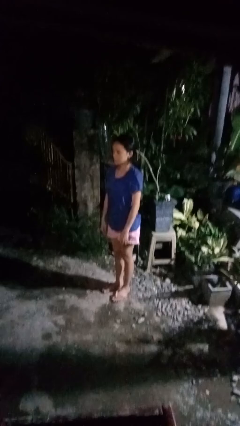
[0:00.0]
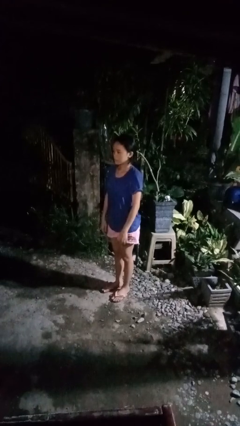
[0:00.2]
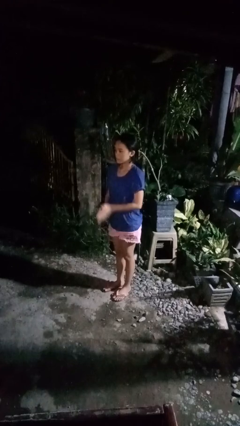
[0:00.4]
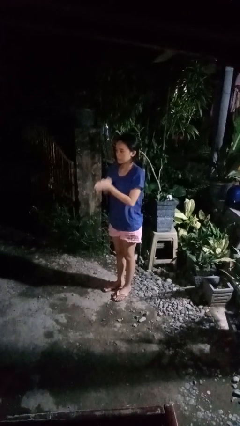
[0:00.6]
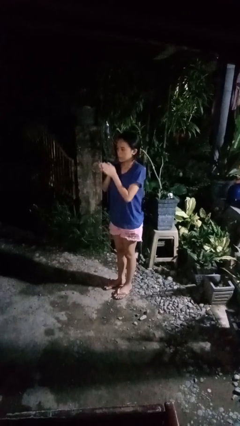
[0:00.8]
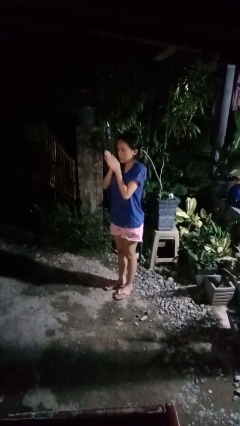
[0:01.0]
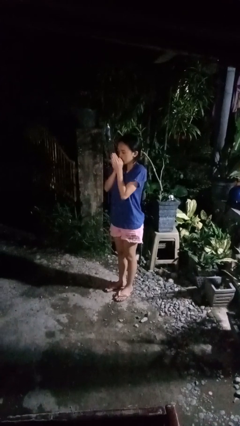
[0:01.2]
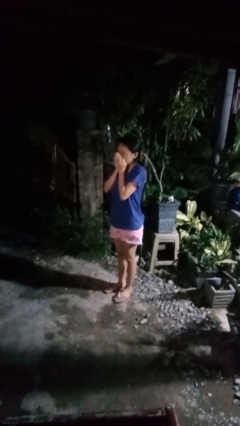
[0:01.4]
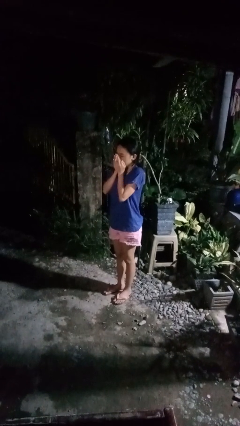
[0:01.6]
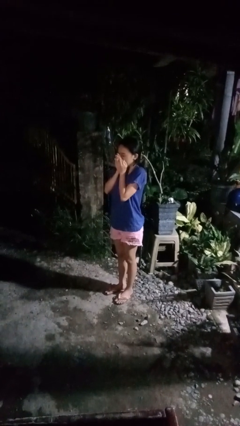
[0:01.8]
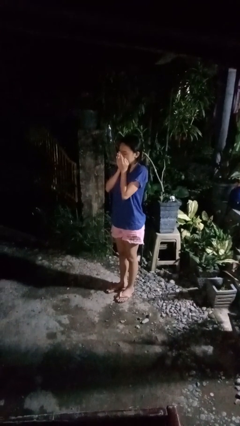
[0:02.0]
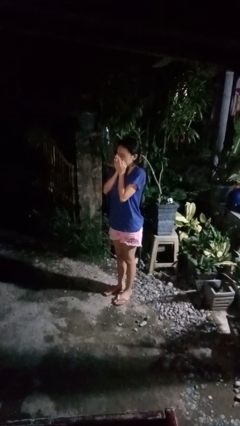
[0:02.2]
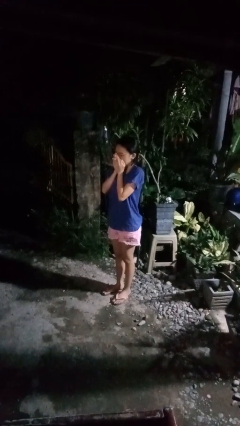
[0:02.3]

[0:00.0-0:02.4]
person blows into hands

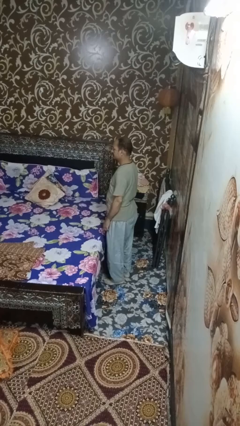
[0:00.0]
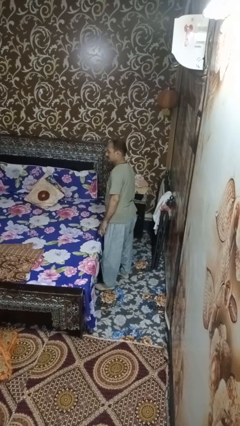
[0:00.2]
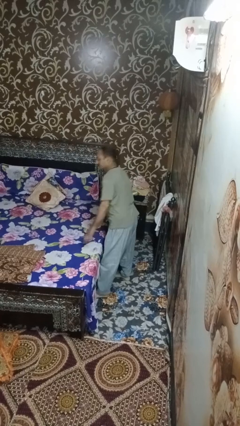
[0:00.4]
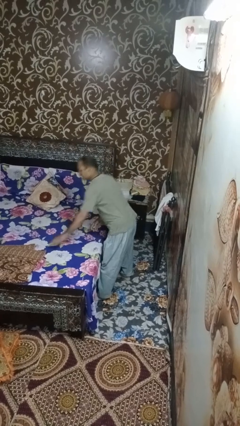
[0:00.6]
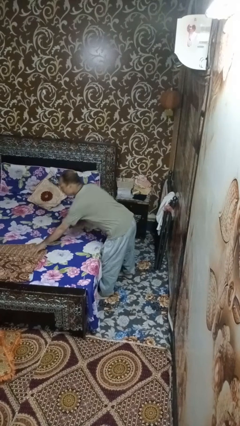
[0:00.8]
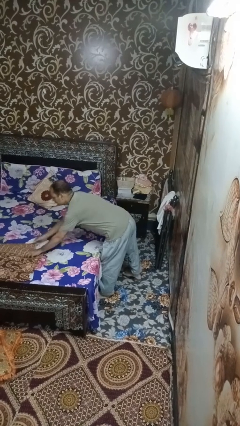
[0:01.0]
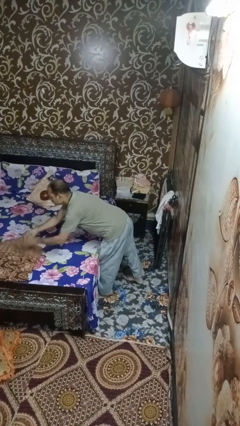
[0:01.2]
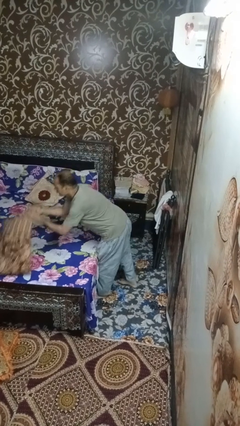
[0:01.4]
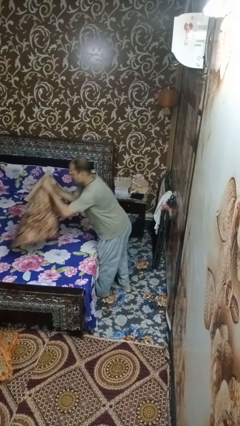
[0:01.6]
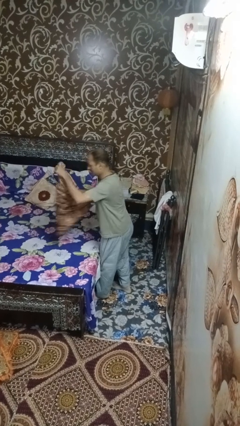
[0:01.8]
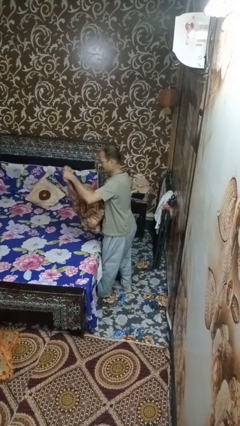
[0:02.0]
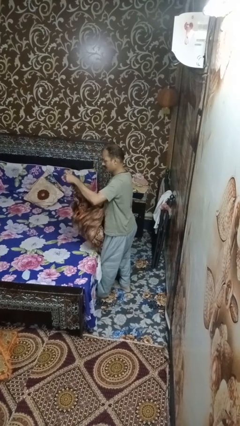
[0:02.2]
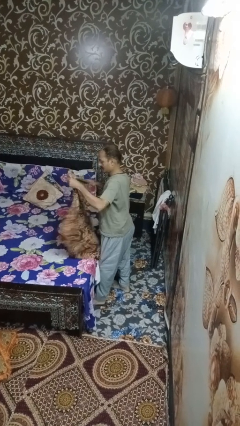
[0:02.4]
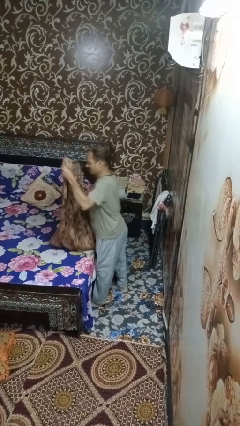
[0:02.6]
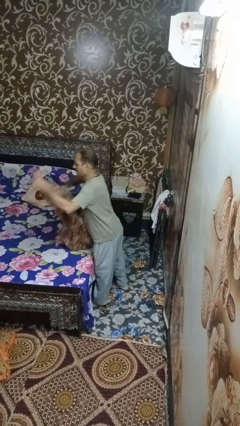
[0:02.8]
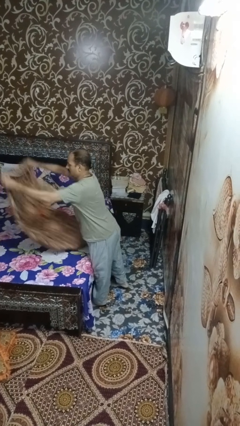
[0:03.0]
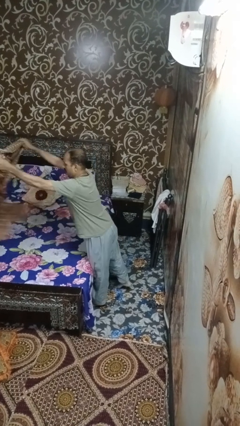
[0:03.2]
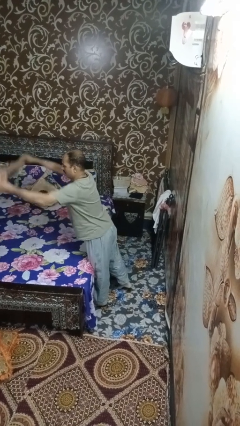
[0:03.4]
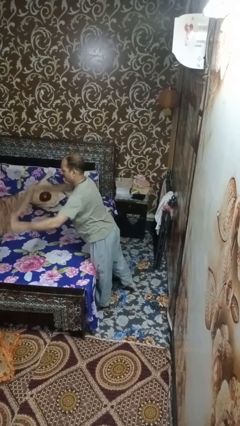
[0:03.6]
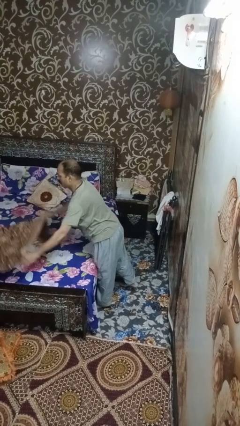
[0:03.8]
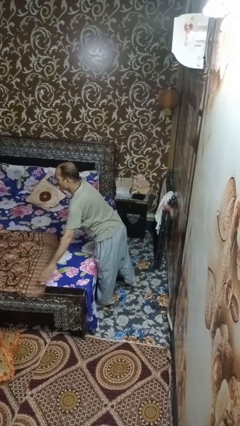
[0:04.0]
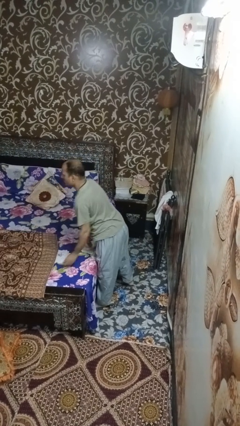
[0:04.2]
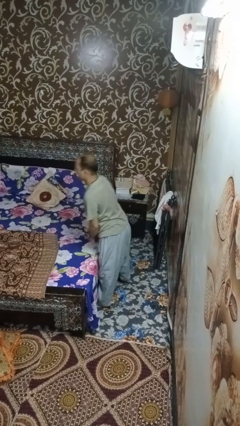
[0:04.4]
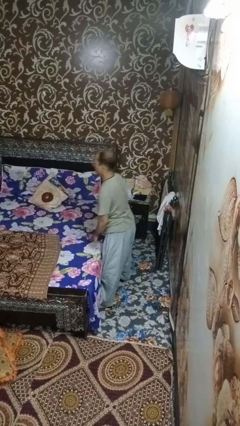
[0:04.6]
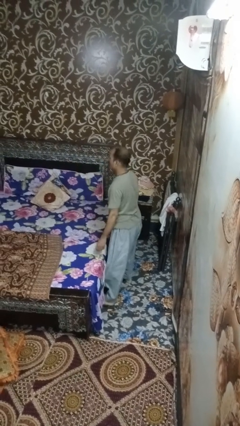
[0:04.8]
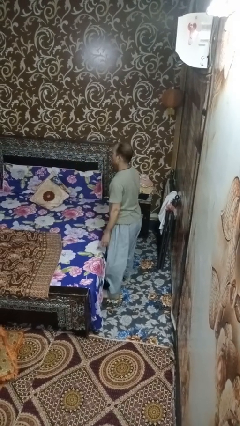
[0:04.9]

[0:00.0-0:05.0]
person makes bed

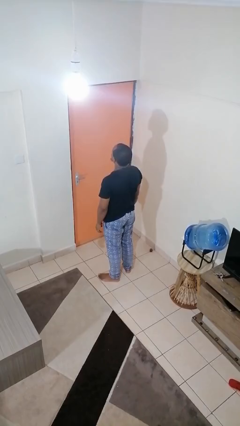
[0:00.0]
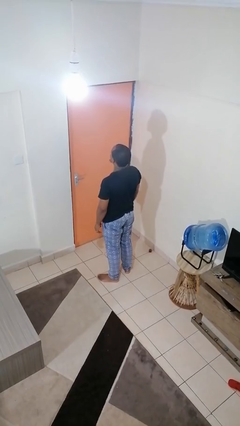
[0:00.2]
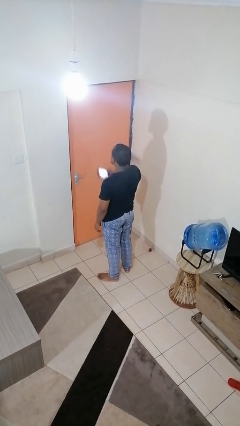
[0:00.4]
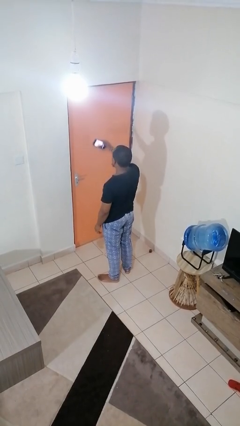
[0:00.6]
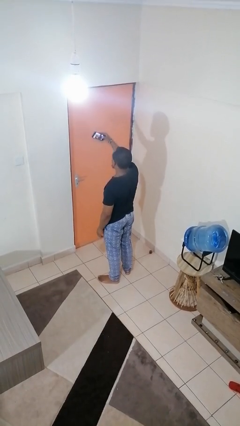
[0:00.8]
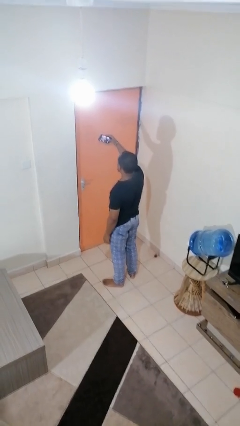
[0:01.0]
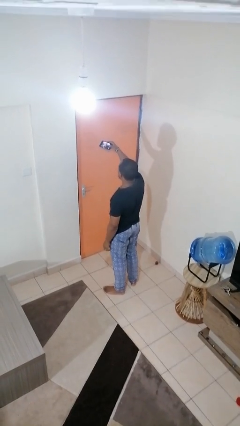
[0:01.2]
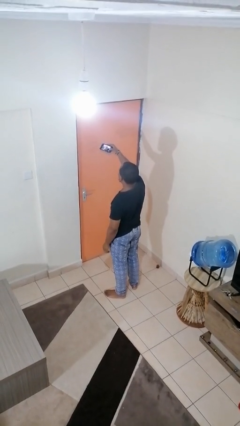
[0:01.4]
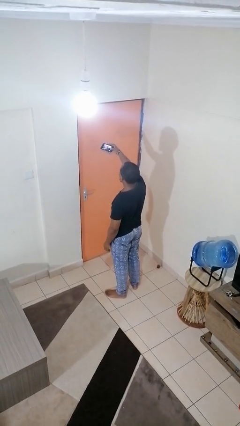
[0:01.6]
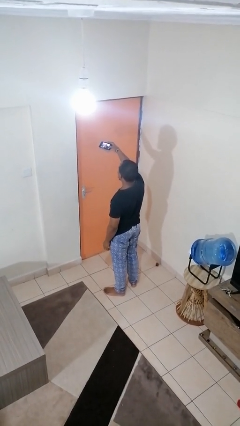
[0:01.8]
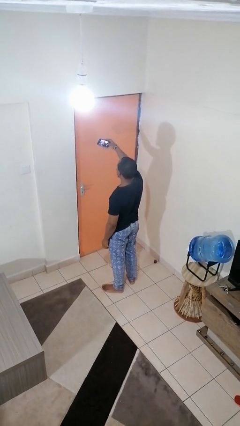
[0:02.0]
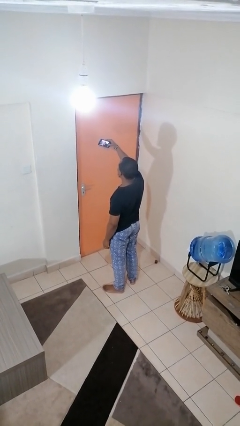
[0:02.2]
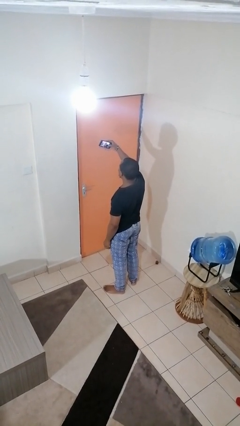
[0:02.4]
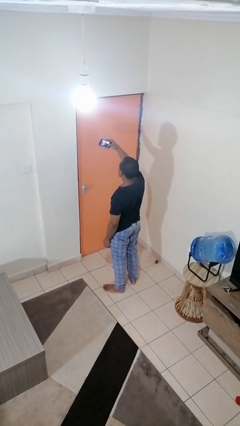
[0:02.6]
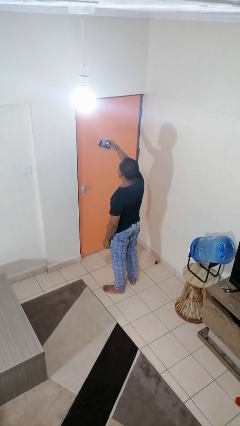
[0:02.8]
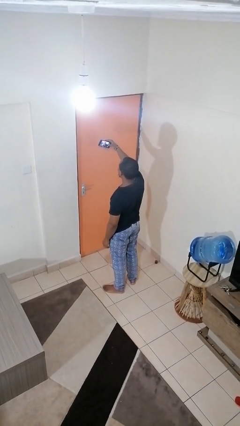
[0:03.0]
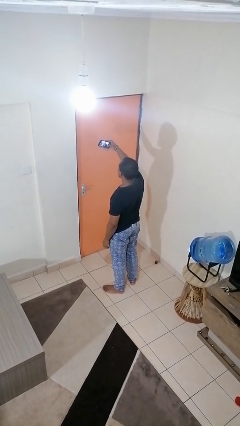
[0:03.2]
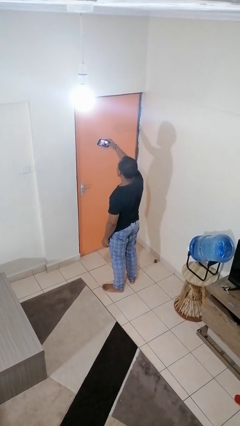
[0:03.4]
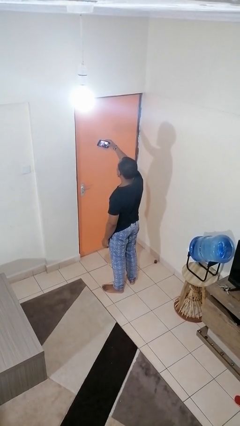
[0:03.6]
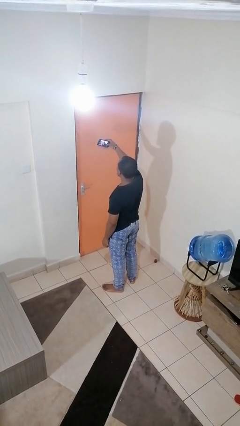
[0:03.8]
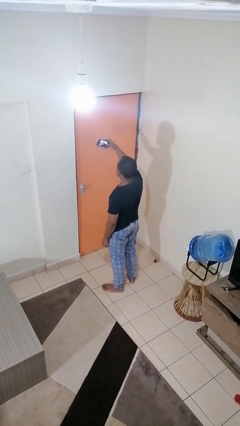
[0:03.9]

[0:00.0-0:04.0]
person takes selfie

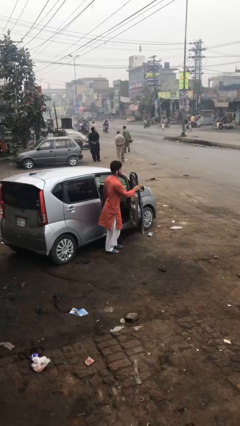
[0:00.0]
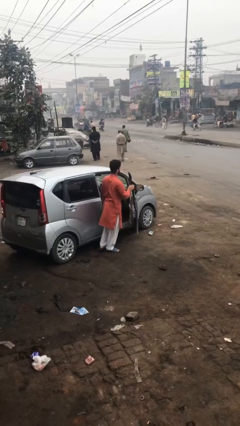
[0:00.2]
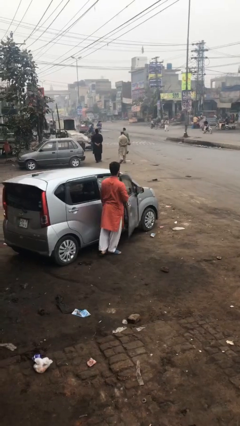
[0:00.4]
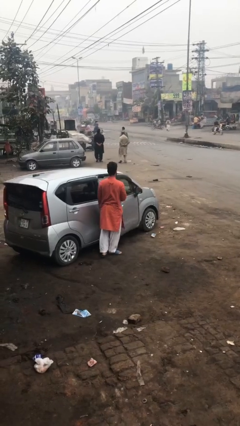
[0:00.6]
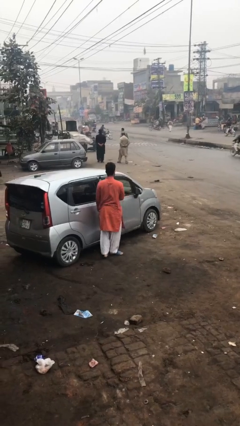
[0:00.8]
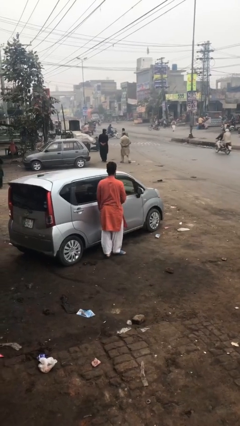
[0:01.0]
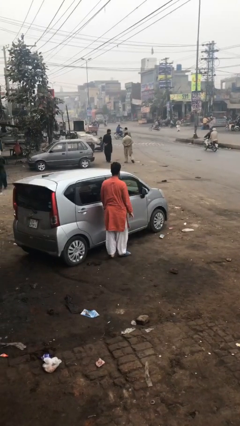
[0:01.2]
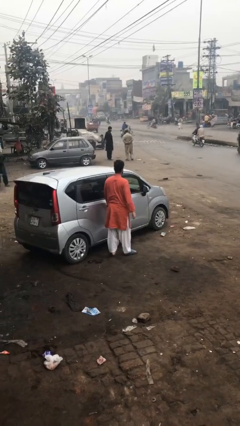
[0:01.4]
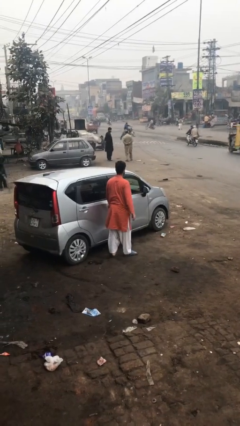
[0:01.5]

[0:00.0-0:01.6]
person closes car door

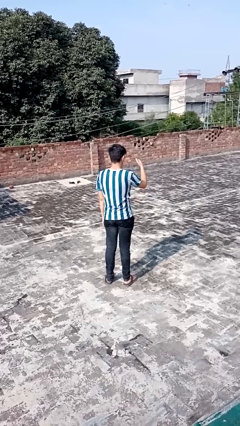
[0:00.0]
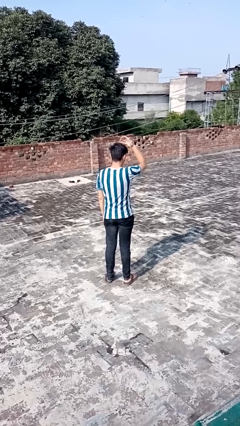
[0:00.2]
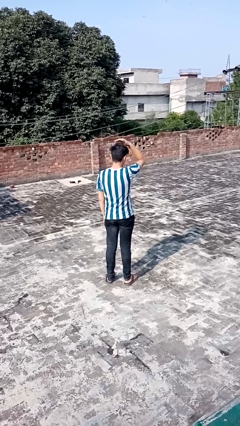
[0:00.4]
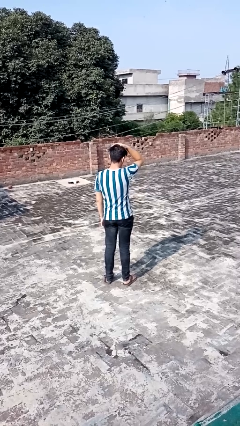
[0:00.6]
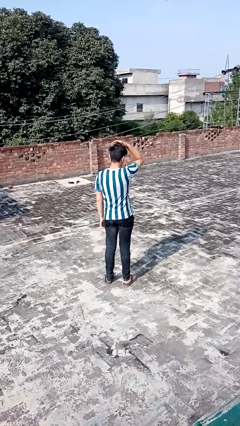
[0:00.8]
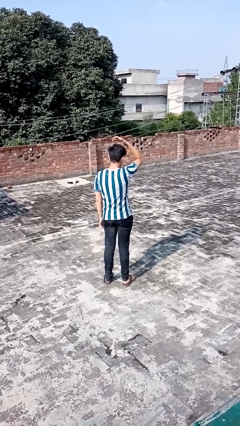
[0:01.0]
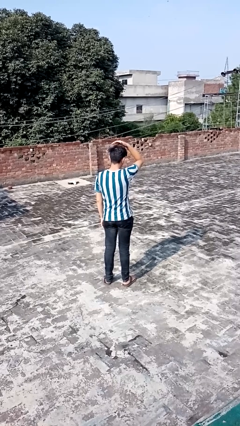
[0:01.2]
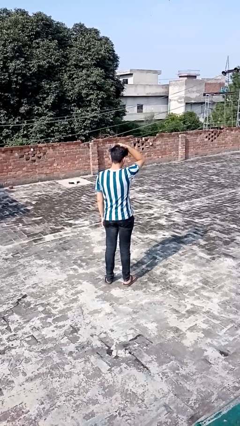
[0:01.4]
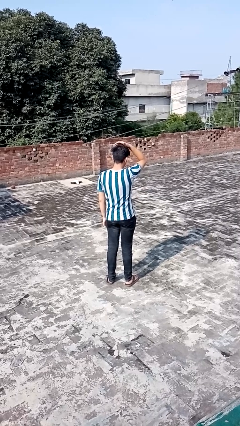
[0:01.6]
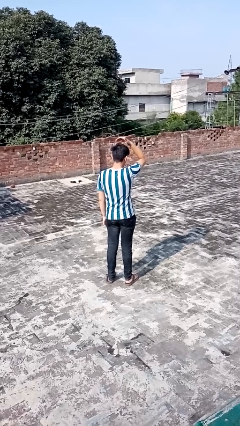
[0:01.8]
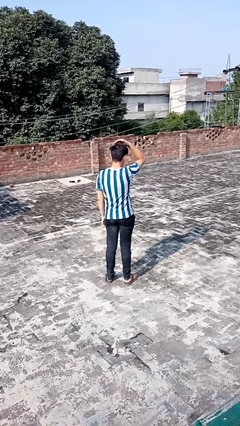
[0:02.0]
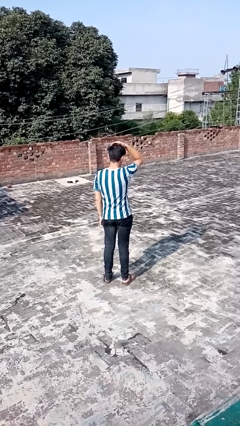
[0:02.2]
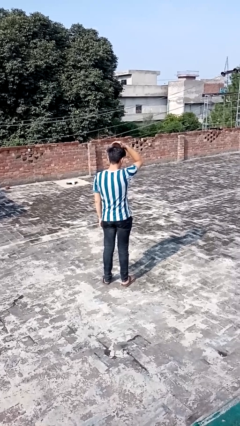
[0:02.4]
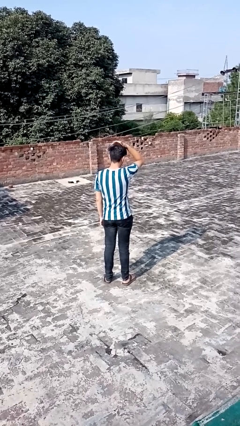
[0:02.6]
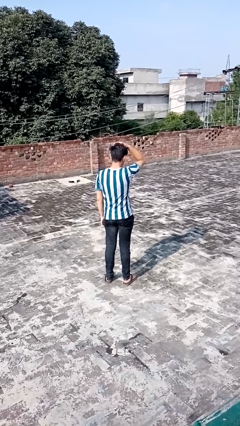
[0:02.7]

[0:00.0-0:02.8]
person pats head

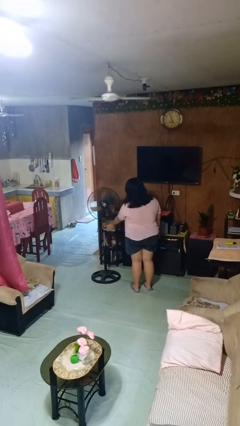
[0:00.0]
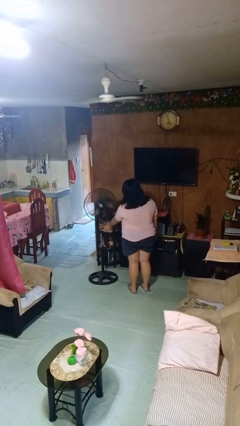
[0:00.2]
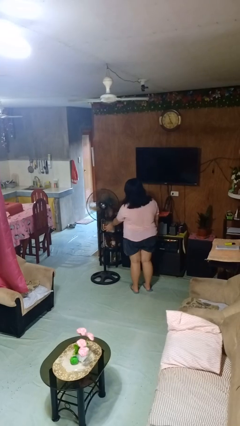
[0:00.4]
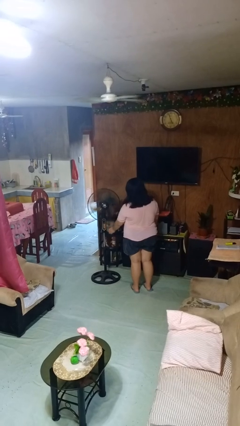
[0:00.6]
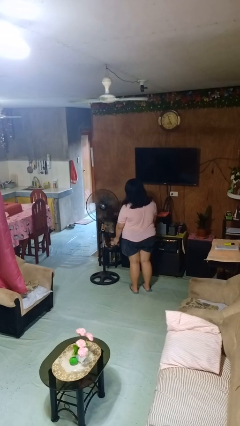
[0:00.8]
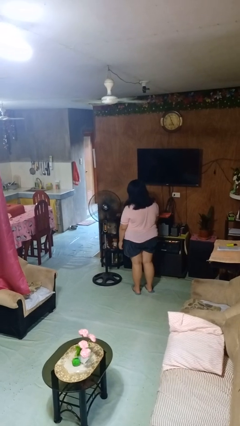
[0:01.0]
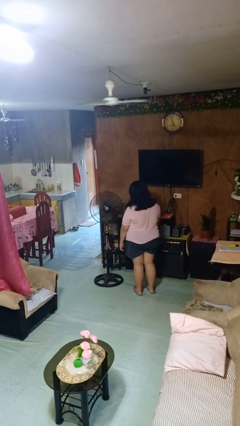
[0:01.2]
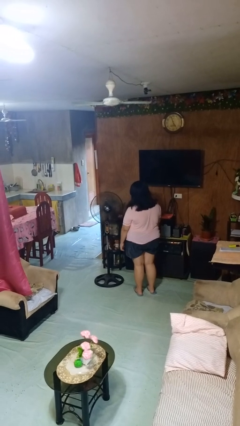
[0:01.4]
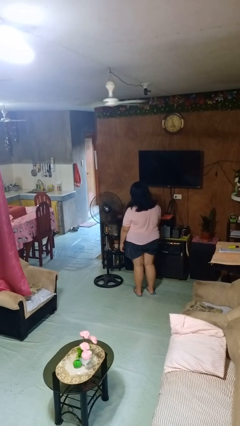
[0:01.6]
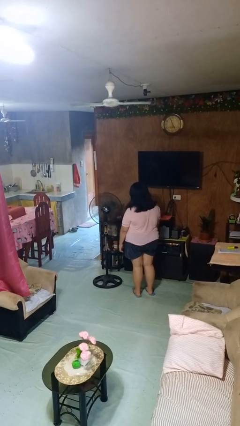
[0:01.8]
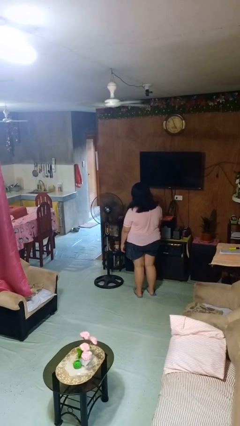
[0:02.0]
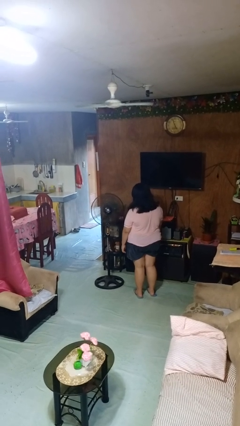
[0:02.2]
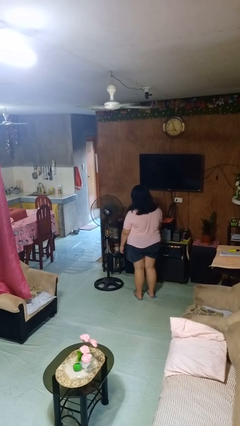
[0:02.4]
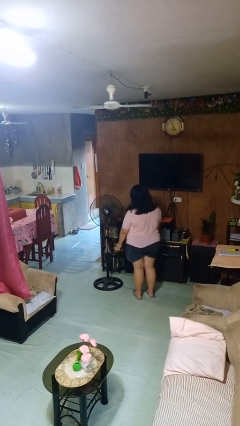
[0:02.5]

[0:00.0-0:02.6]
person turns on fan
